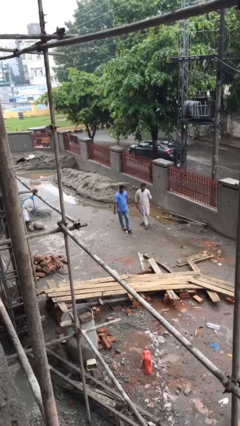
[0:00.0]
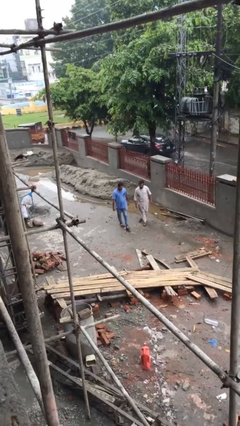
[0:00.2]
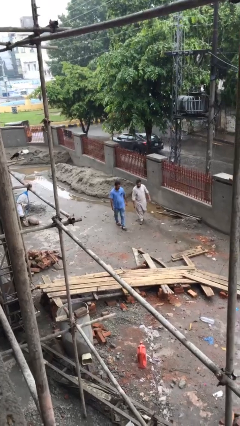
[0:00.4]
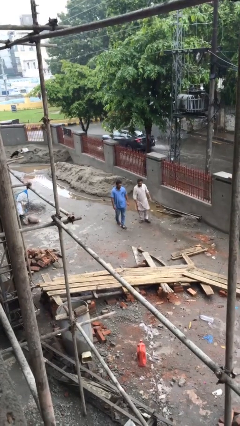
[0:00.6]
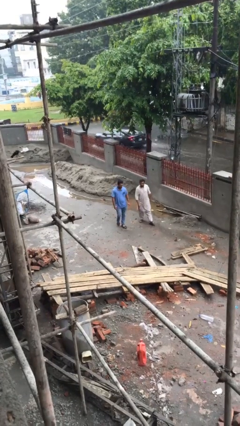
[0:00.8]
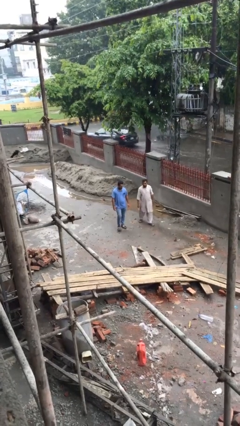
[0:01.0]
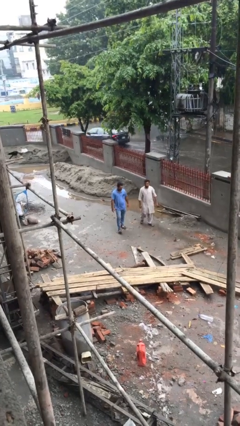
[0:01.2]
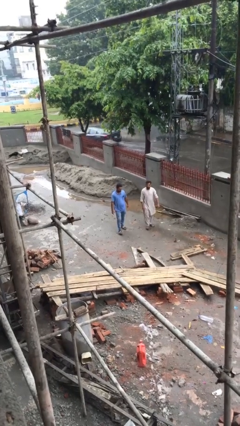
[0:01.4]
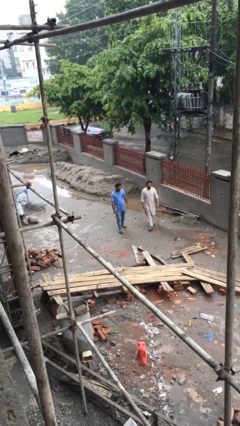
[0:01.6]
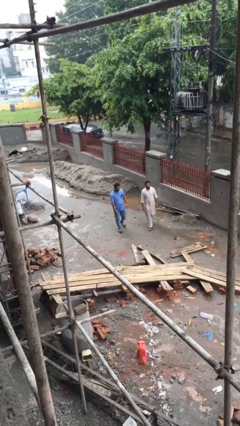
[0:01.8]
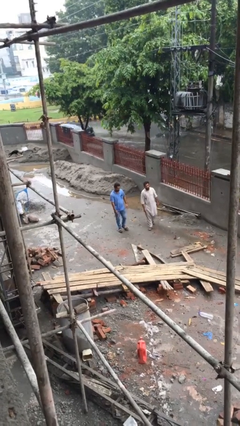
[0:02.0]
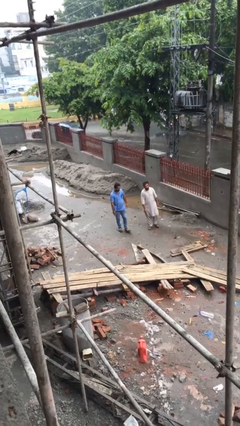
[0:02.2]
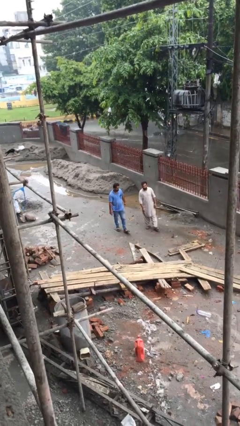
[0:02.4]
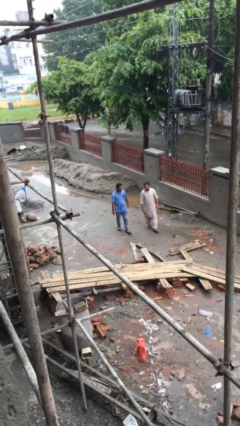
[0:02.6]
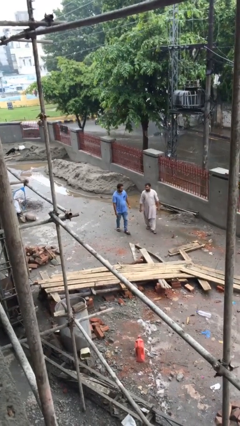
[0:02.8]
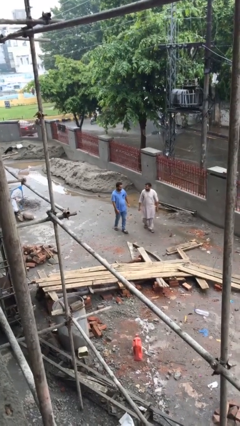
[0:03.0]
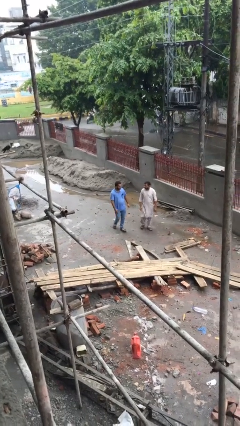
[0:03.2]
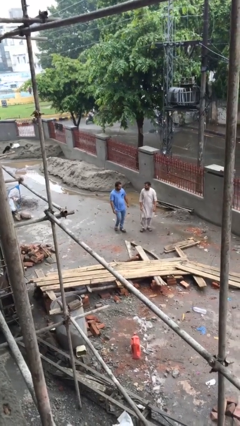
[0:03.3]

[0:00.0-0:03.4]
person talks to person

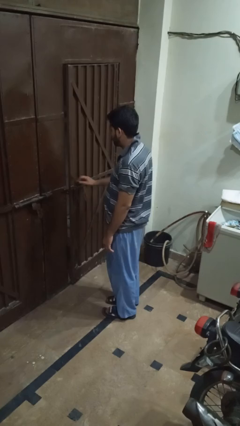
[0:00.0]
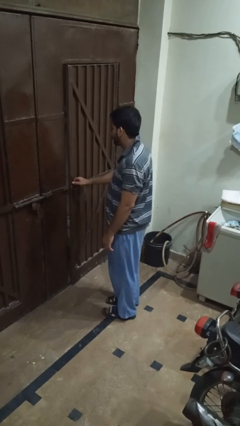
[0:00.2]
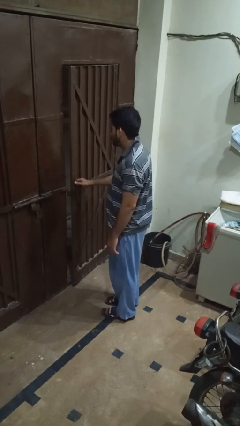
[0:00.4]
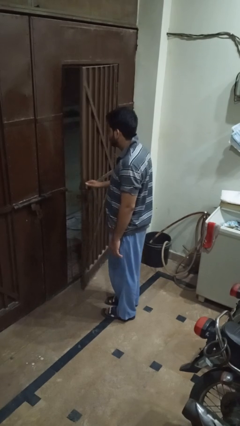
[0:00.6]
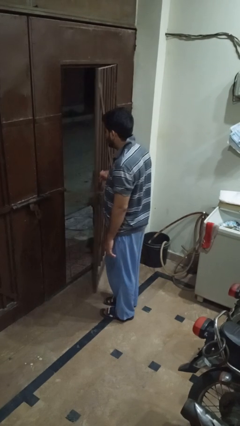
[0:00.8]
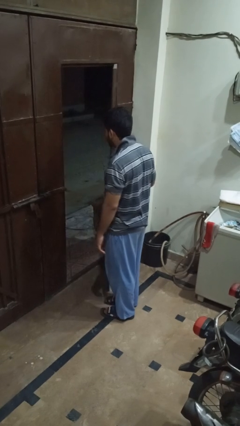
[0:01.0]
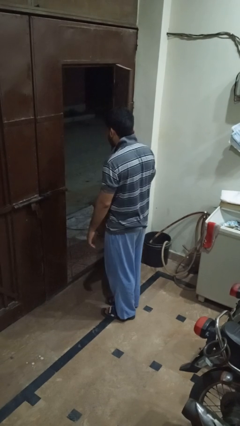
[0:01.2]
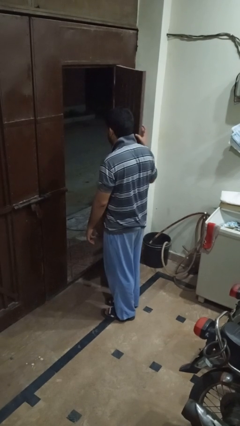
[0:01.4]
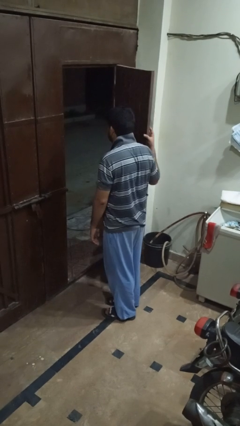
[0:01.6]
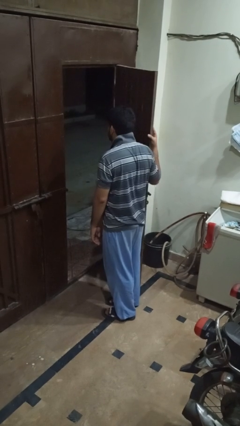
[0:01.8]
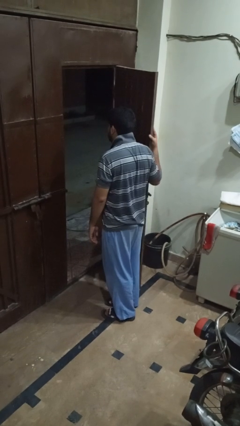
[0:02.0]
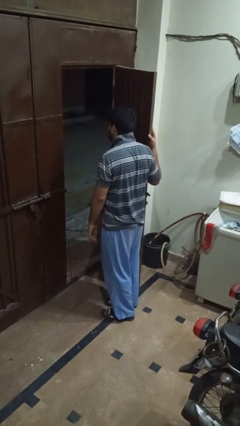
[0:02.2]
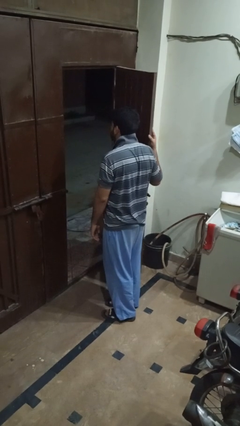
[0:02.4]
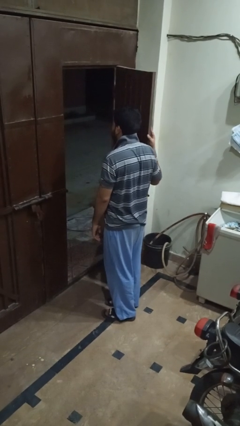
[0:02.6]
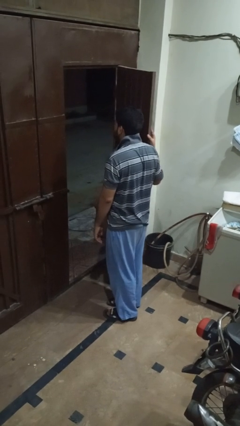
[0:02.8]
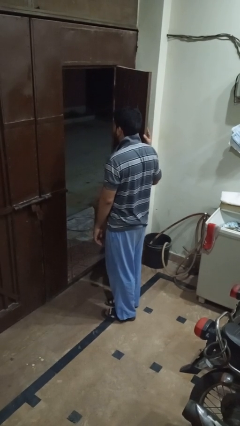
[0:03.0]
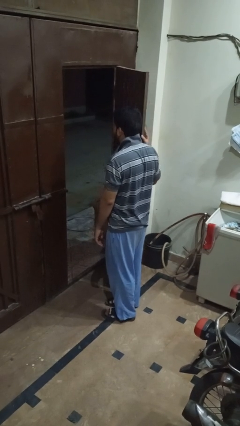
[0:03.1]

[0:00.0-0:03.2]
person opens gate

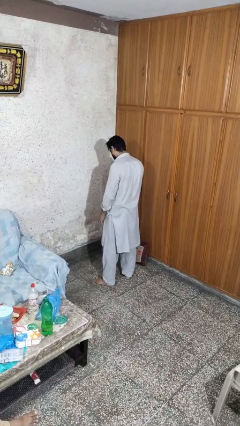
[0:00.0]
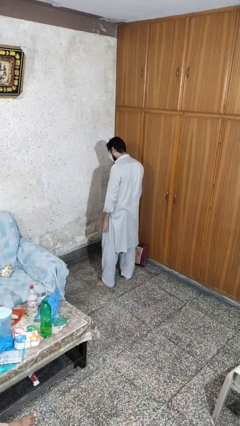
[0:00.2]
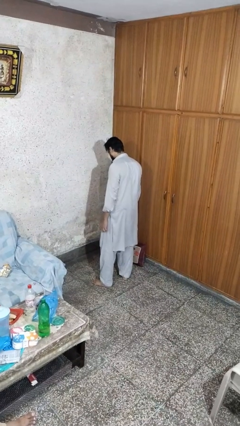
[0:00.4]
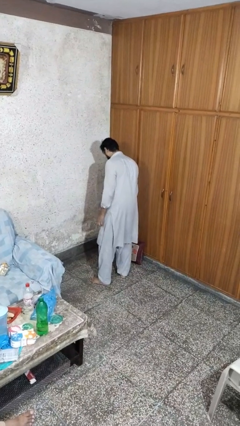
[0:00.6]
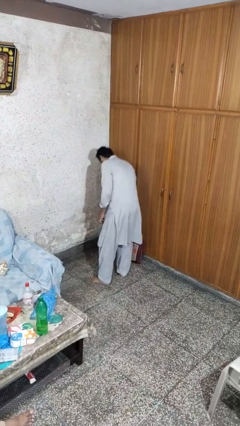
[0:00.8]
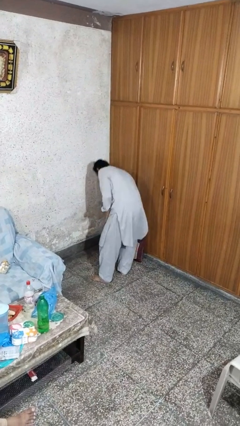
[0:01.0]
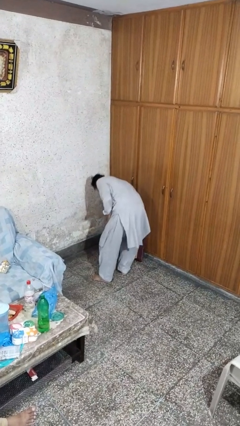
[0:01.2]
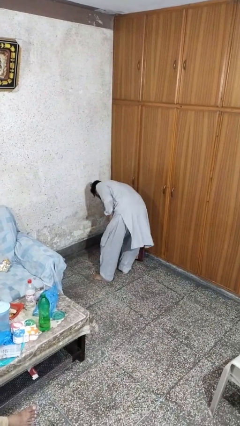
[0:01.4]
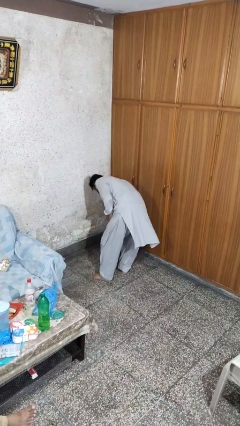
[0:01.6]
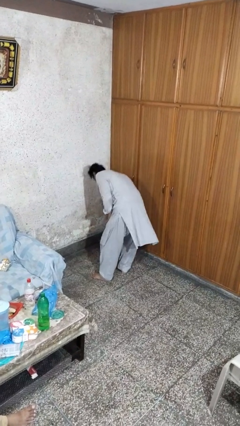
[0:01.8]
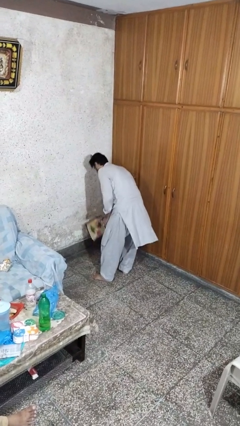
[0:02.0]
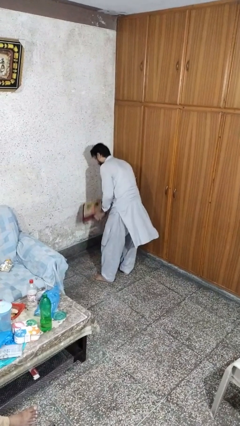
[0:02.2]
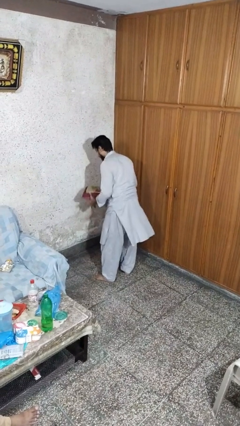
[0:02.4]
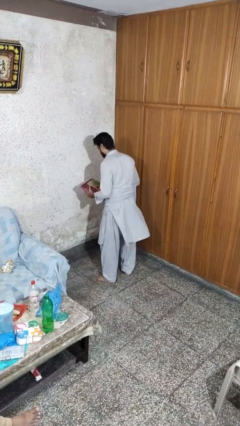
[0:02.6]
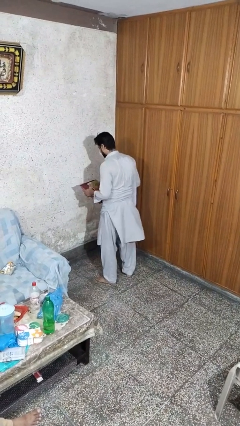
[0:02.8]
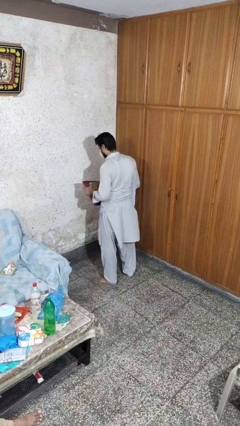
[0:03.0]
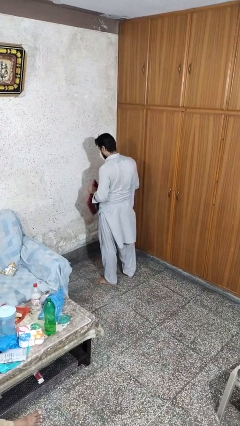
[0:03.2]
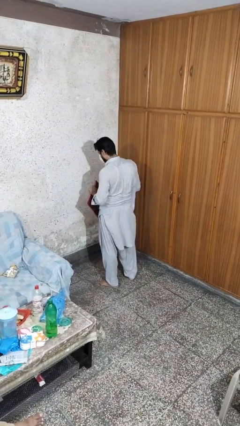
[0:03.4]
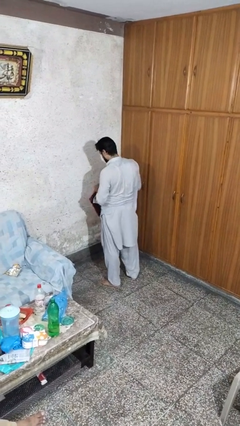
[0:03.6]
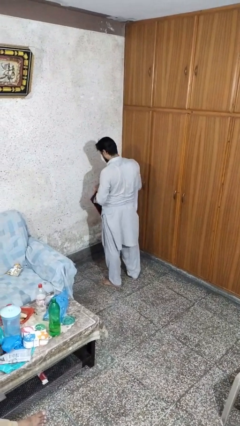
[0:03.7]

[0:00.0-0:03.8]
person picks up object from floor

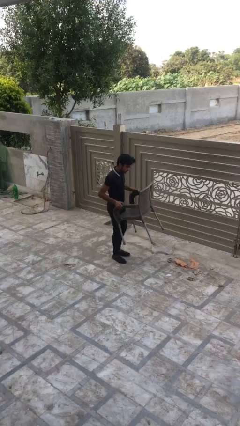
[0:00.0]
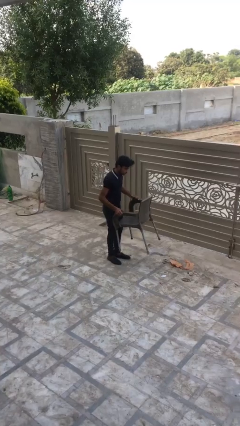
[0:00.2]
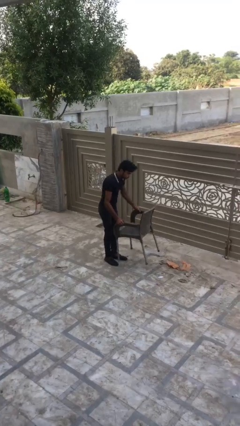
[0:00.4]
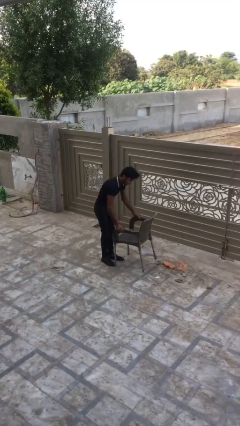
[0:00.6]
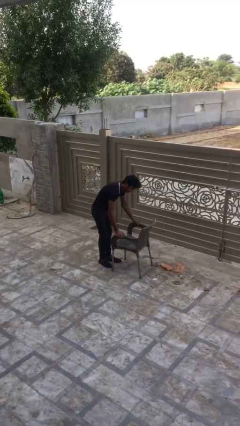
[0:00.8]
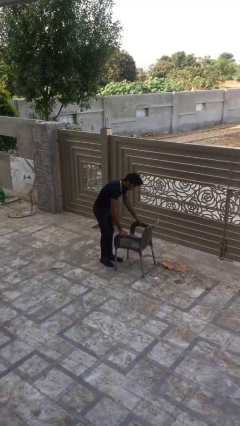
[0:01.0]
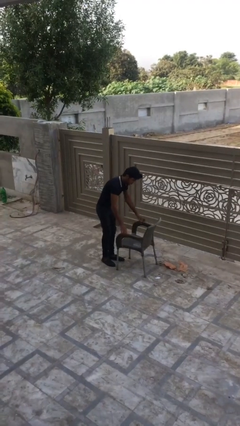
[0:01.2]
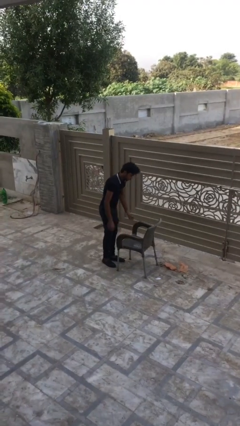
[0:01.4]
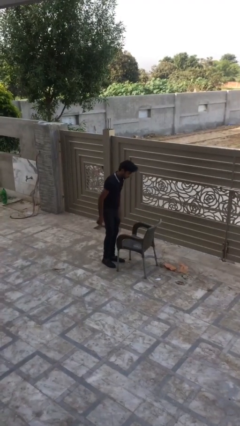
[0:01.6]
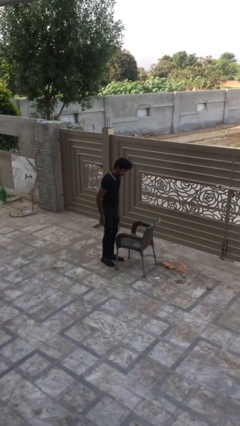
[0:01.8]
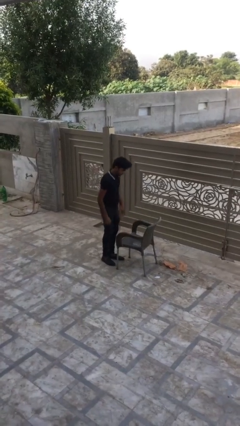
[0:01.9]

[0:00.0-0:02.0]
person puts down object on floor

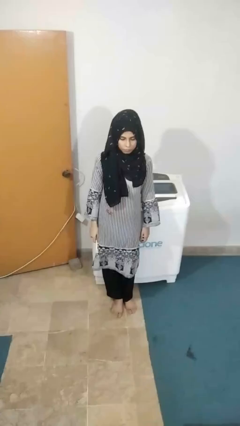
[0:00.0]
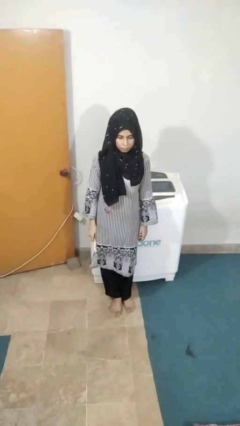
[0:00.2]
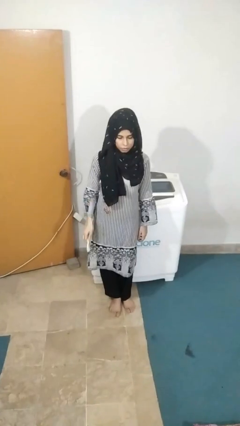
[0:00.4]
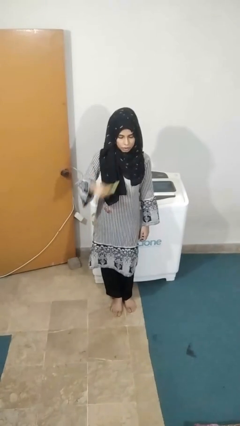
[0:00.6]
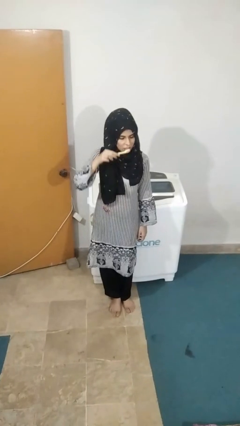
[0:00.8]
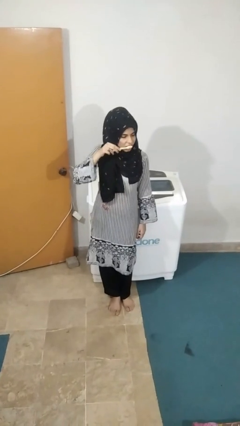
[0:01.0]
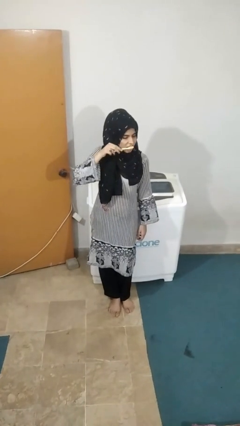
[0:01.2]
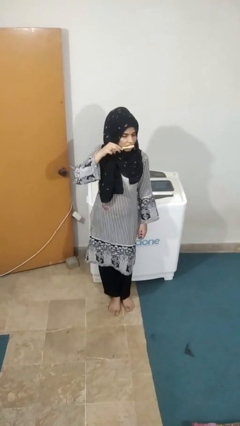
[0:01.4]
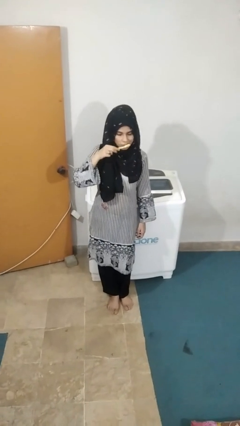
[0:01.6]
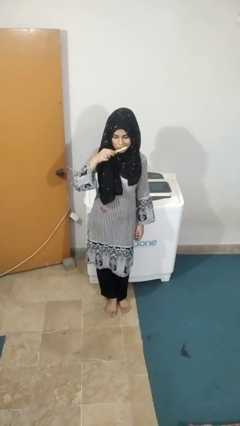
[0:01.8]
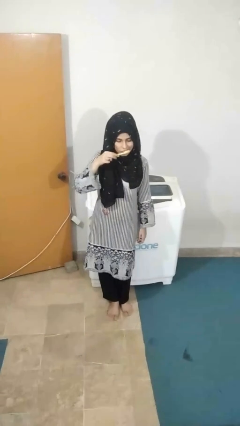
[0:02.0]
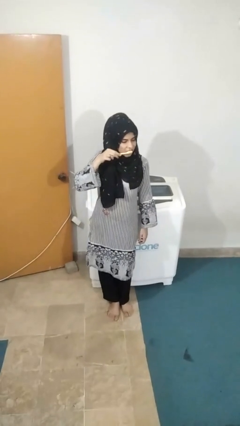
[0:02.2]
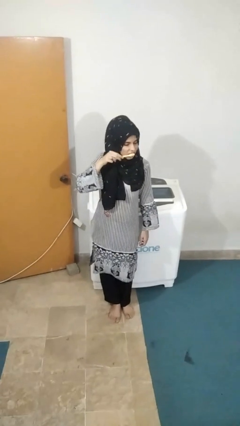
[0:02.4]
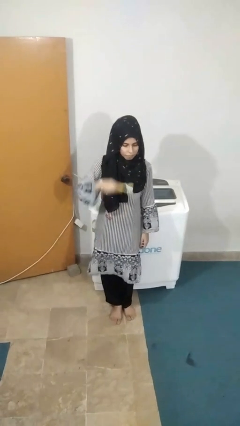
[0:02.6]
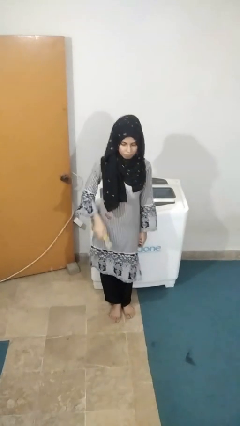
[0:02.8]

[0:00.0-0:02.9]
person brushes teeth

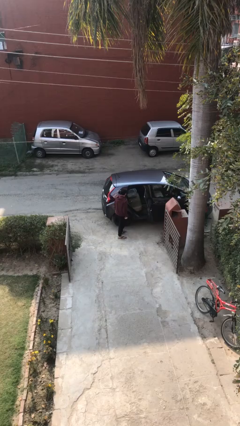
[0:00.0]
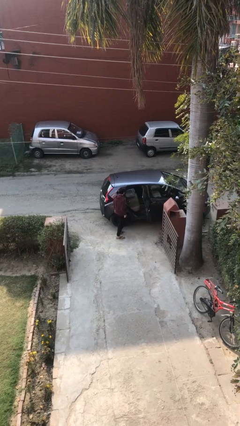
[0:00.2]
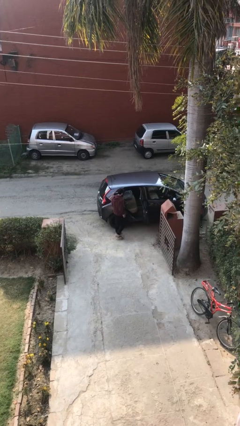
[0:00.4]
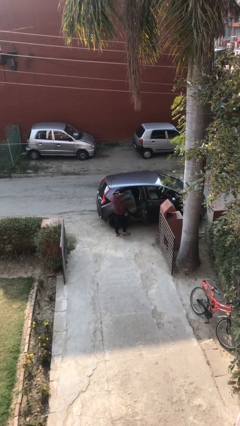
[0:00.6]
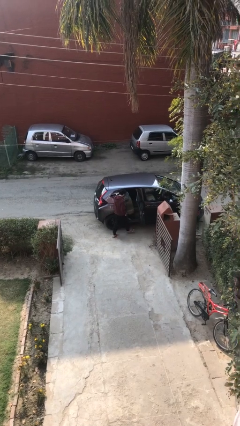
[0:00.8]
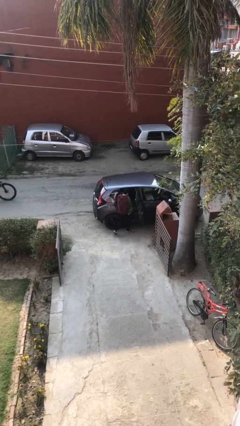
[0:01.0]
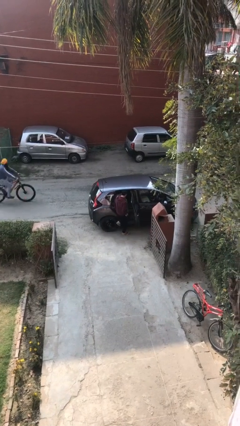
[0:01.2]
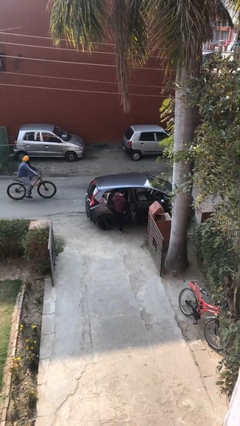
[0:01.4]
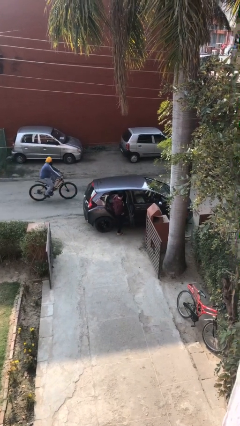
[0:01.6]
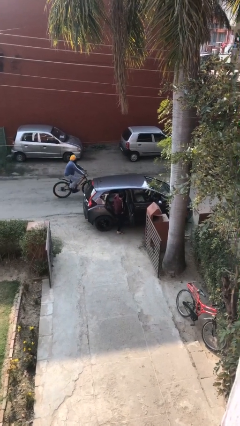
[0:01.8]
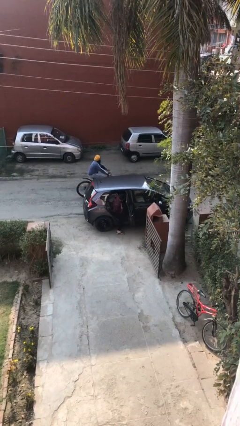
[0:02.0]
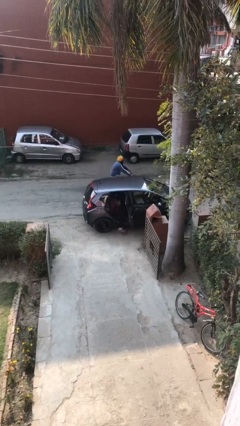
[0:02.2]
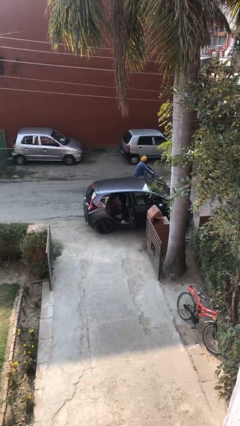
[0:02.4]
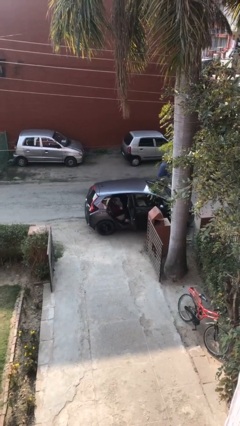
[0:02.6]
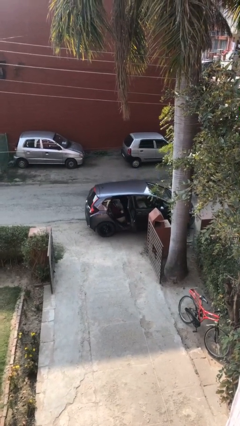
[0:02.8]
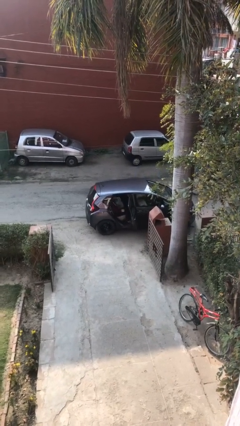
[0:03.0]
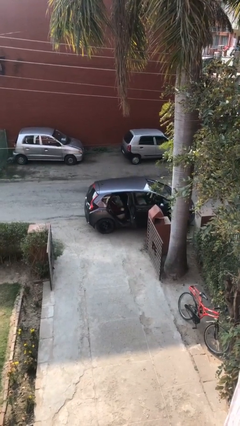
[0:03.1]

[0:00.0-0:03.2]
person enters car
